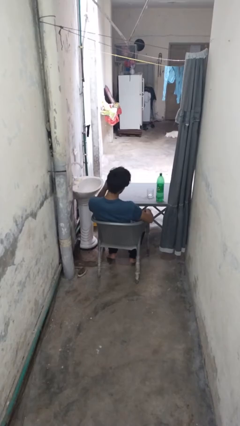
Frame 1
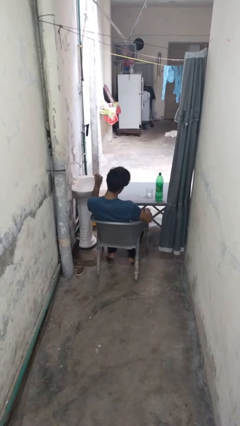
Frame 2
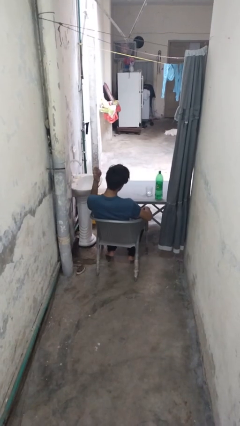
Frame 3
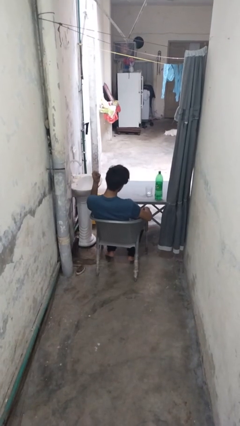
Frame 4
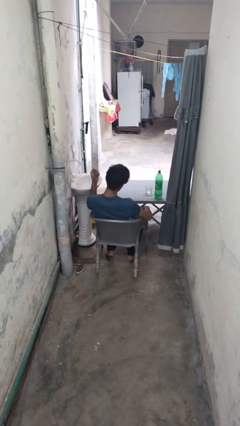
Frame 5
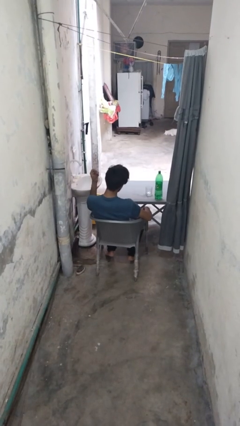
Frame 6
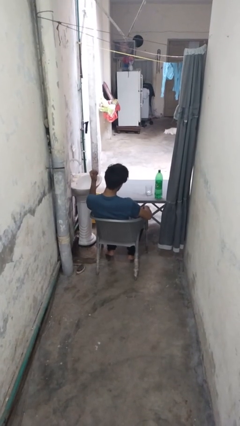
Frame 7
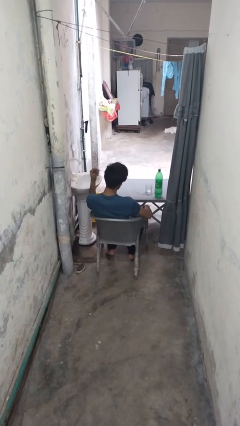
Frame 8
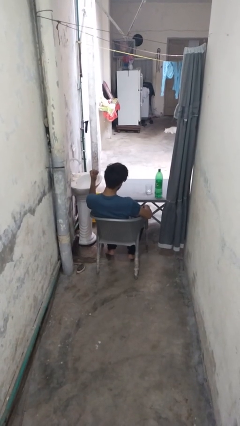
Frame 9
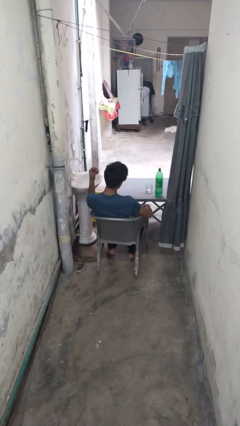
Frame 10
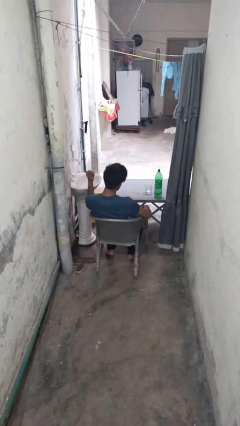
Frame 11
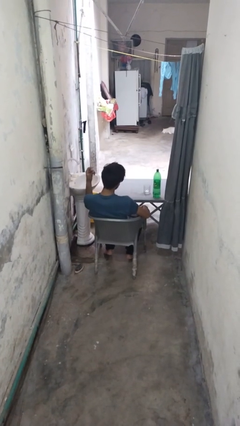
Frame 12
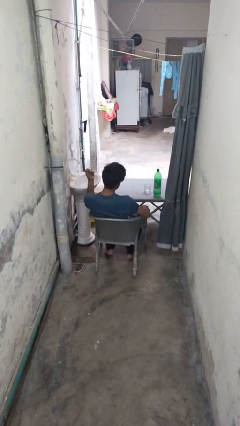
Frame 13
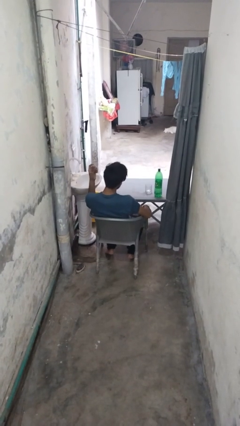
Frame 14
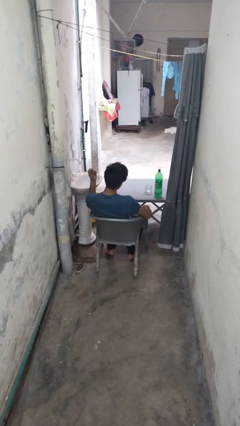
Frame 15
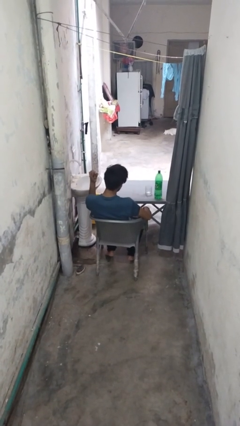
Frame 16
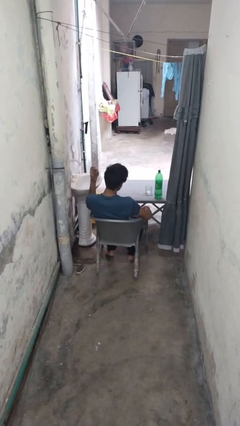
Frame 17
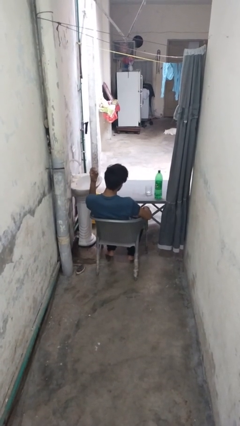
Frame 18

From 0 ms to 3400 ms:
person snaps fingers

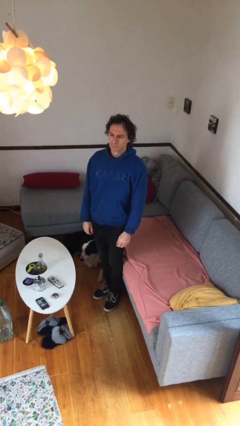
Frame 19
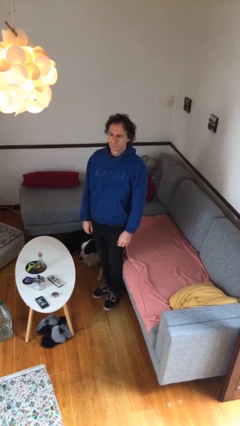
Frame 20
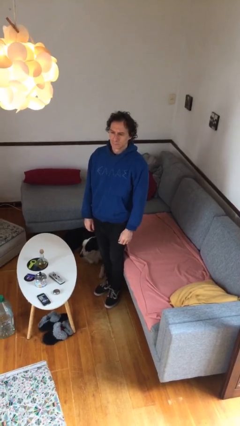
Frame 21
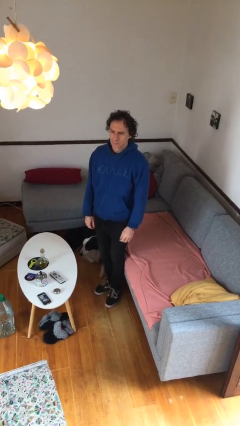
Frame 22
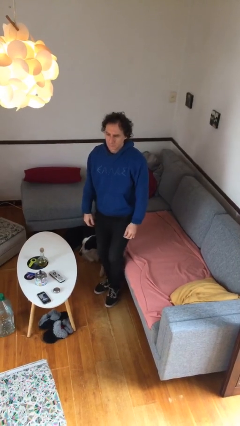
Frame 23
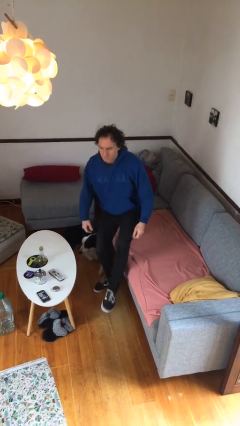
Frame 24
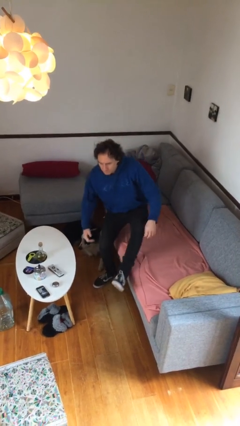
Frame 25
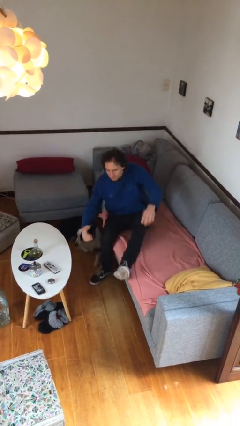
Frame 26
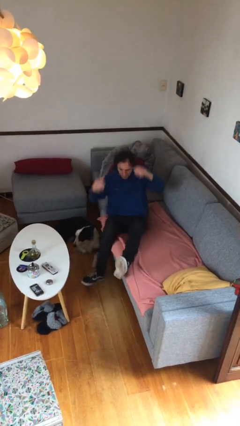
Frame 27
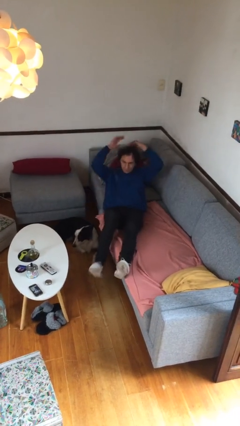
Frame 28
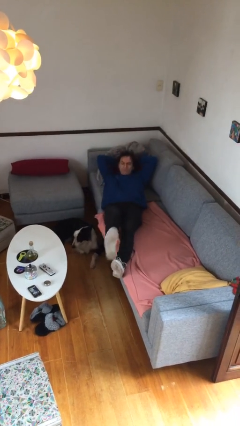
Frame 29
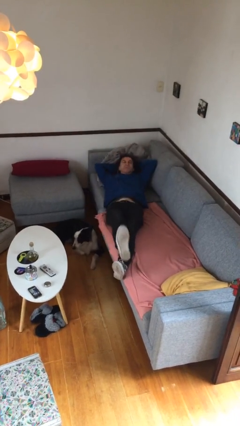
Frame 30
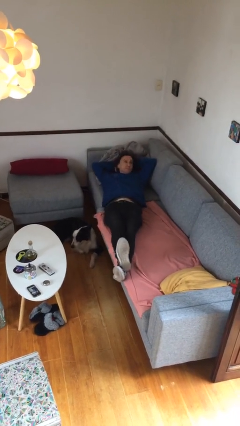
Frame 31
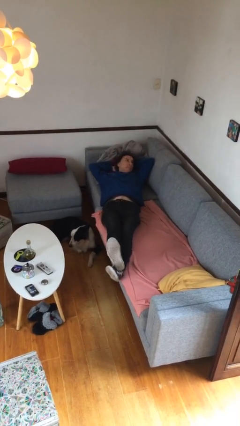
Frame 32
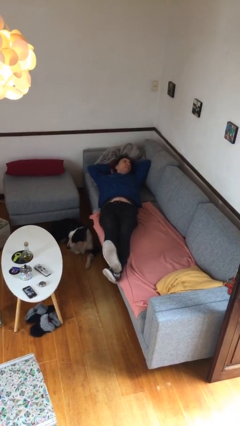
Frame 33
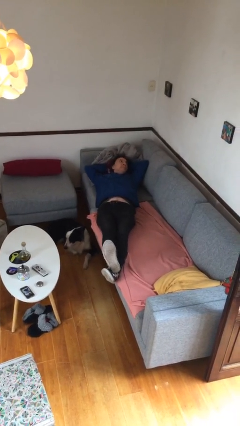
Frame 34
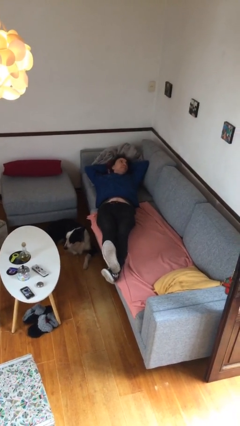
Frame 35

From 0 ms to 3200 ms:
person lies down on couch

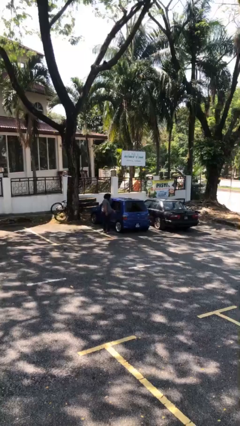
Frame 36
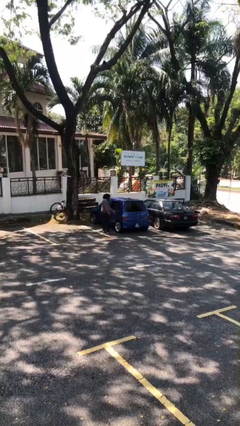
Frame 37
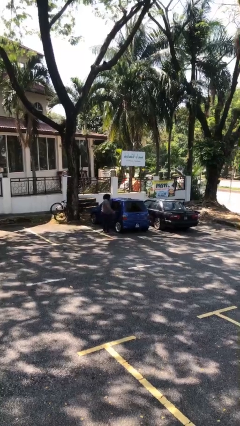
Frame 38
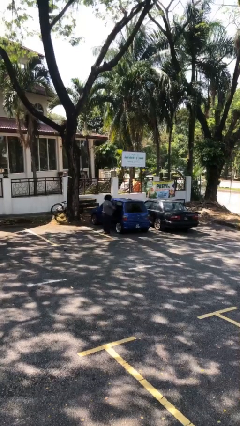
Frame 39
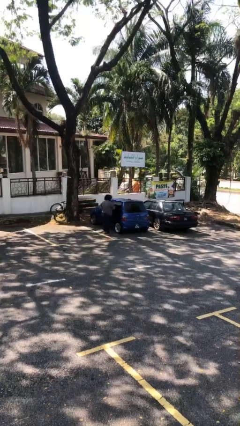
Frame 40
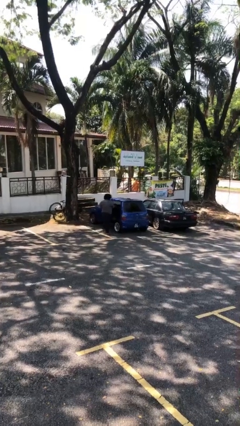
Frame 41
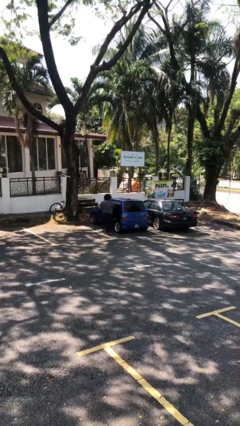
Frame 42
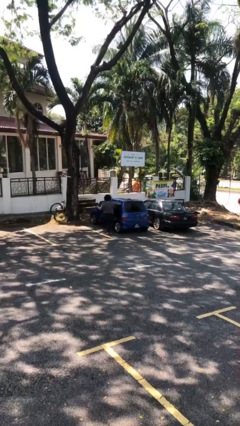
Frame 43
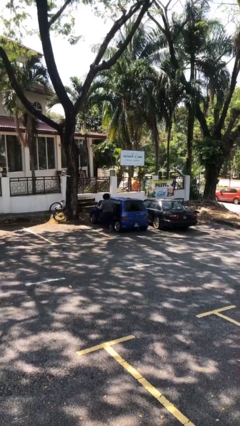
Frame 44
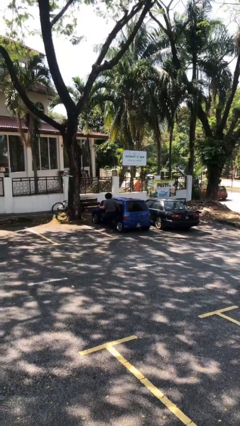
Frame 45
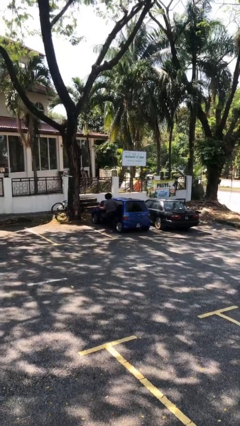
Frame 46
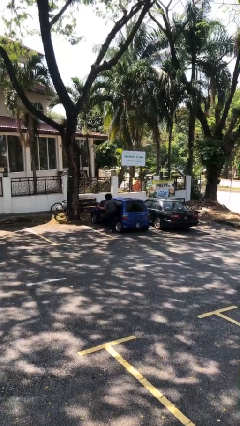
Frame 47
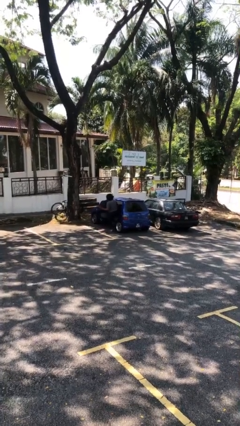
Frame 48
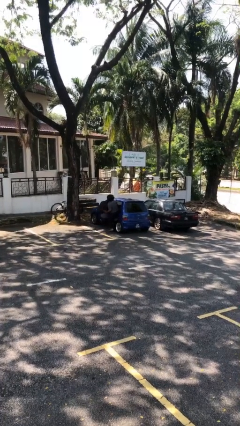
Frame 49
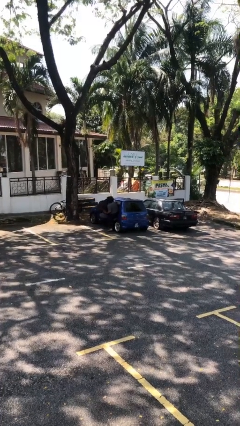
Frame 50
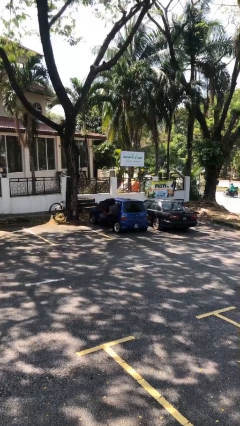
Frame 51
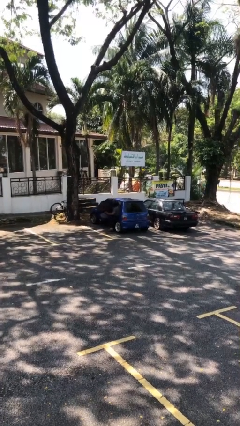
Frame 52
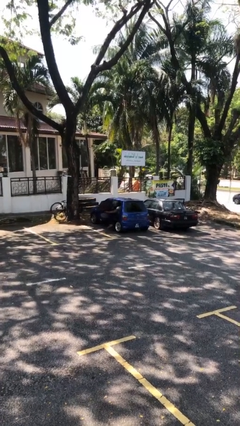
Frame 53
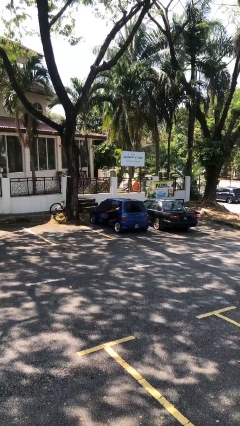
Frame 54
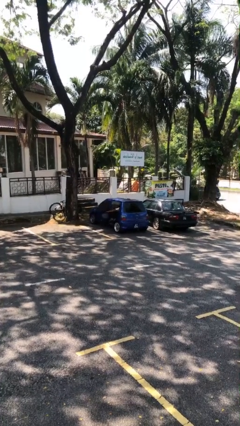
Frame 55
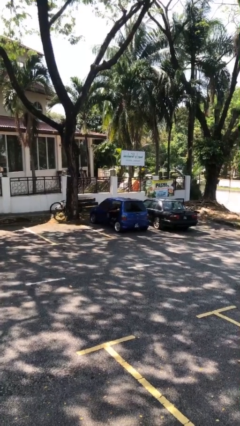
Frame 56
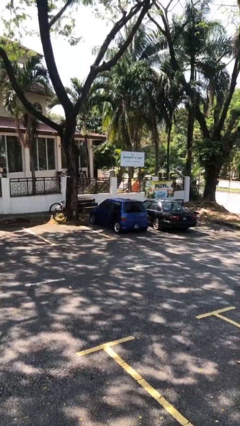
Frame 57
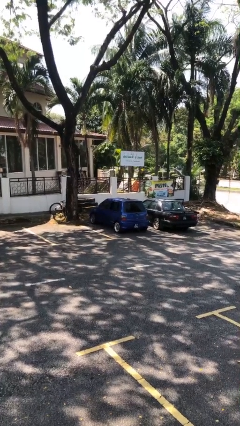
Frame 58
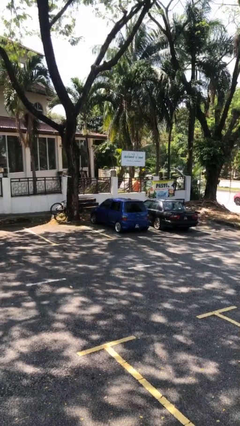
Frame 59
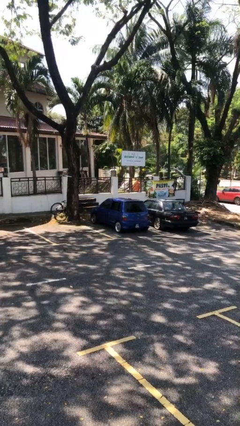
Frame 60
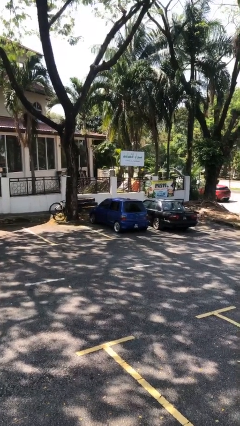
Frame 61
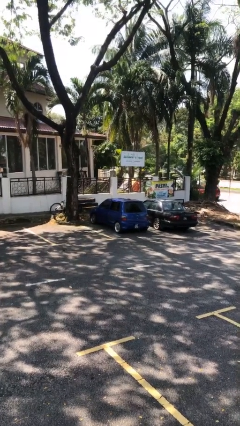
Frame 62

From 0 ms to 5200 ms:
car picks up person

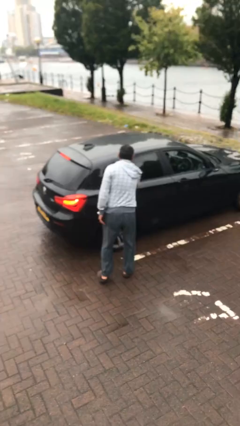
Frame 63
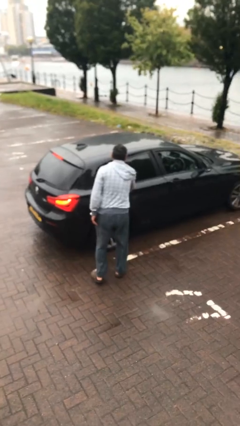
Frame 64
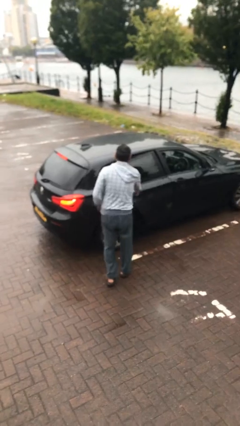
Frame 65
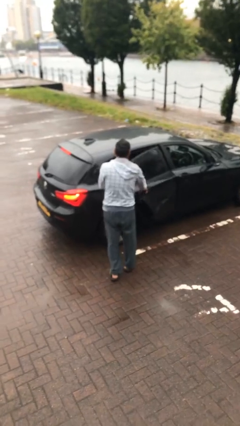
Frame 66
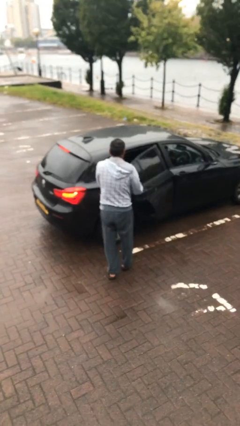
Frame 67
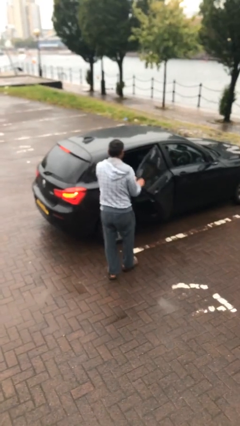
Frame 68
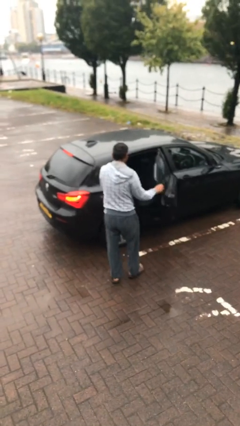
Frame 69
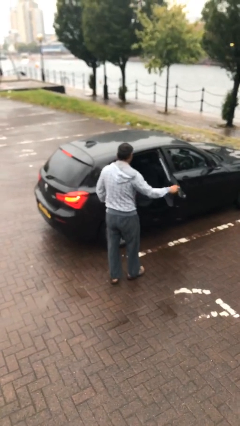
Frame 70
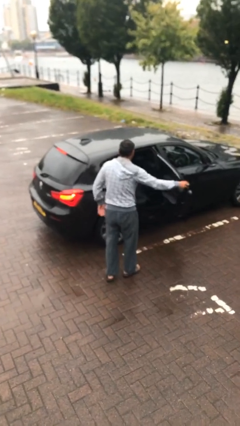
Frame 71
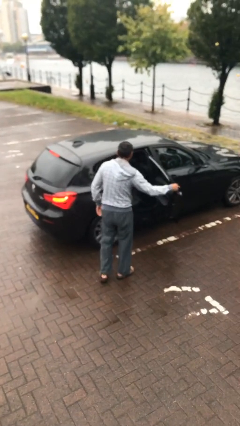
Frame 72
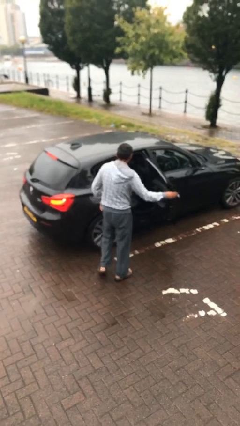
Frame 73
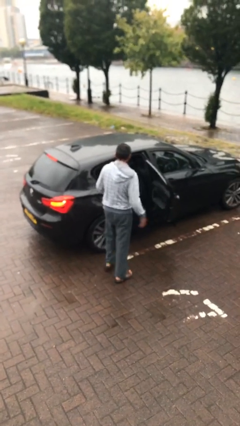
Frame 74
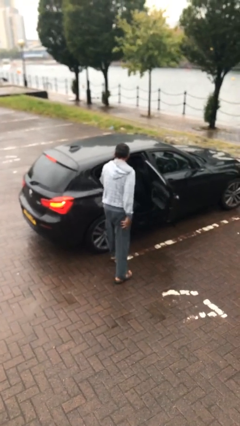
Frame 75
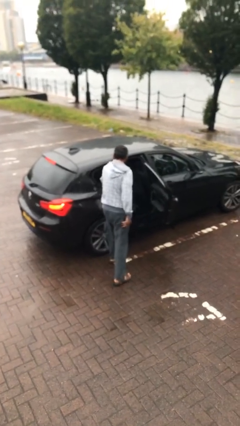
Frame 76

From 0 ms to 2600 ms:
person opens car door

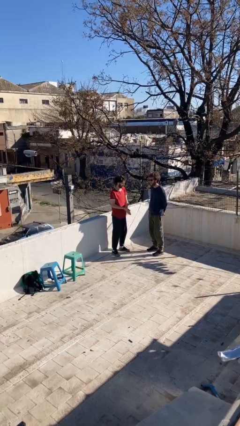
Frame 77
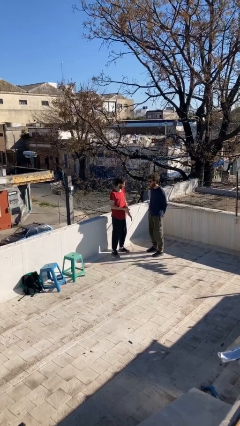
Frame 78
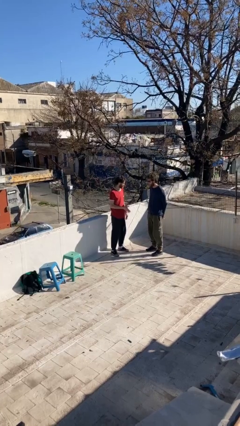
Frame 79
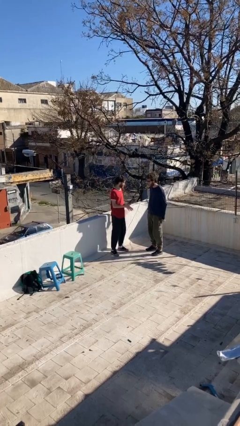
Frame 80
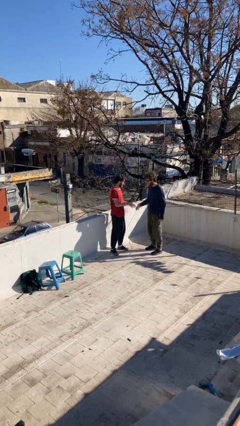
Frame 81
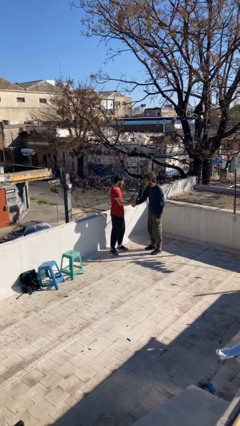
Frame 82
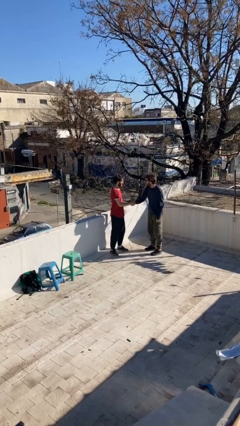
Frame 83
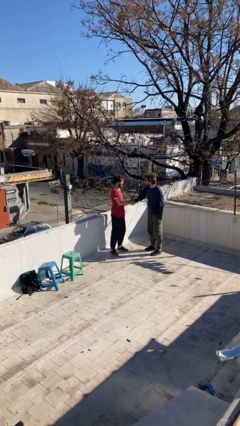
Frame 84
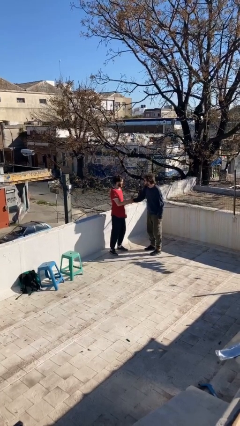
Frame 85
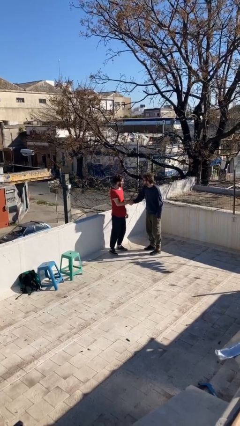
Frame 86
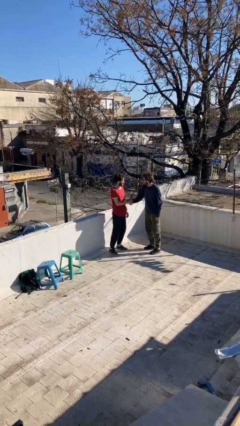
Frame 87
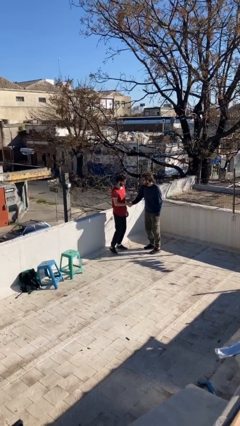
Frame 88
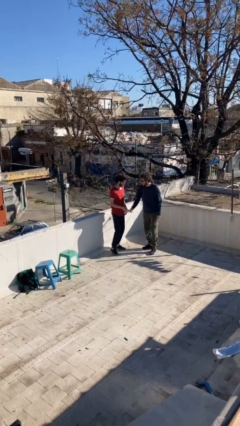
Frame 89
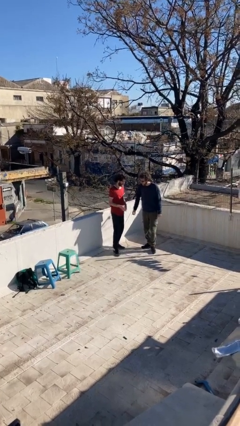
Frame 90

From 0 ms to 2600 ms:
person shakes hand

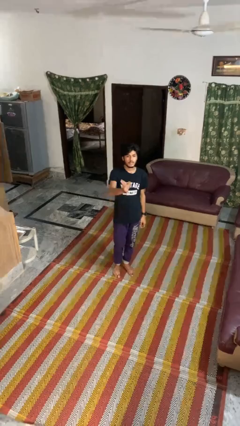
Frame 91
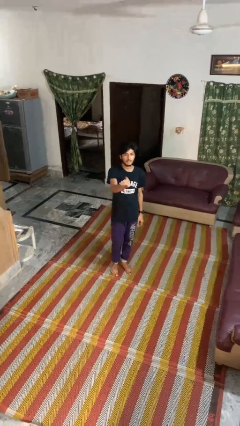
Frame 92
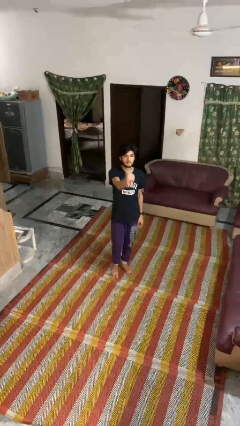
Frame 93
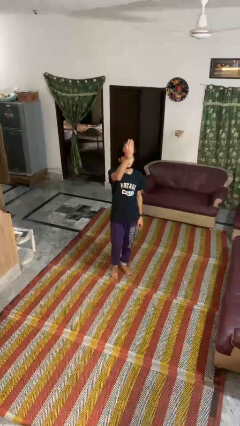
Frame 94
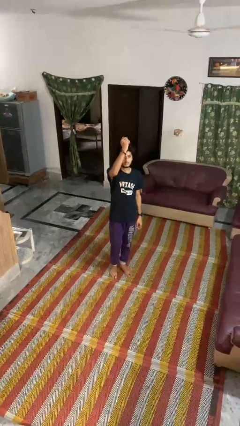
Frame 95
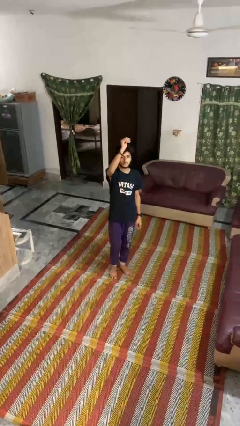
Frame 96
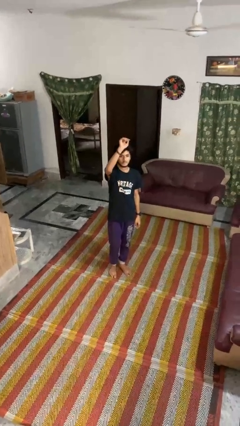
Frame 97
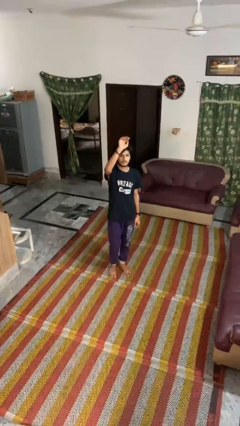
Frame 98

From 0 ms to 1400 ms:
person gestures swipe up
